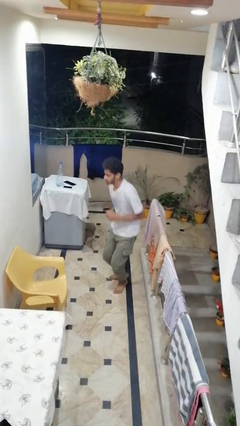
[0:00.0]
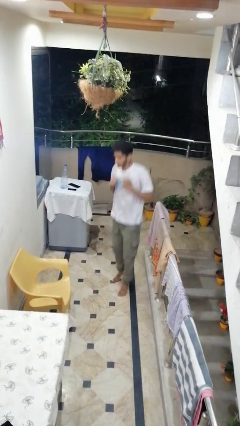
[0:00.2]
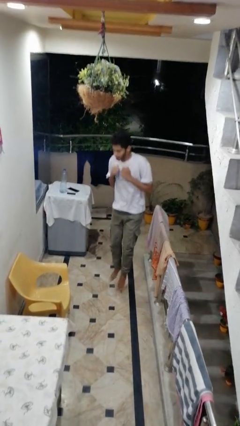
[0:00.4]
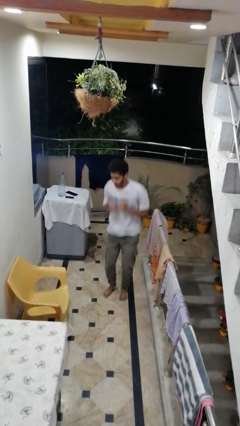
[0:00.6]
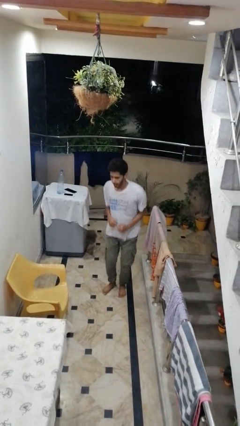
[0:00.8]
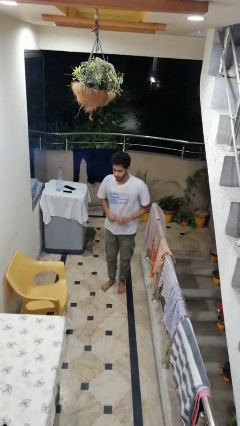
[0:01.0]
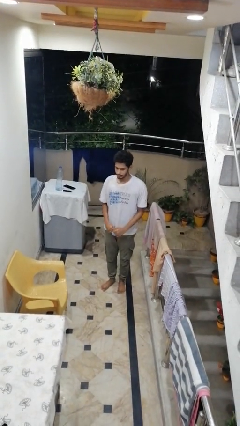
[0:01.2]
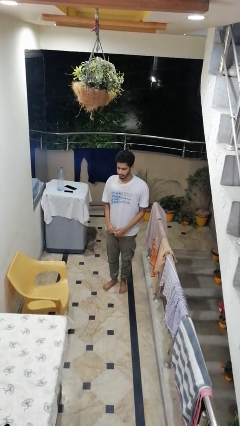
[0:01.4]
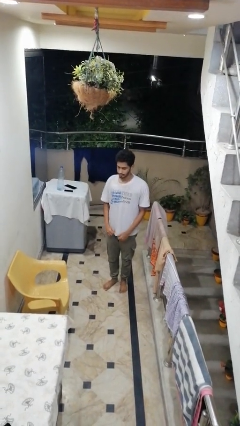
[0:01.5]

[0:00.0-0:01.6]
person jumps

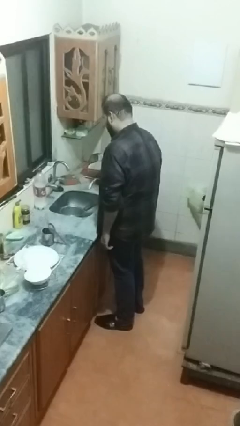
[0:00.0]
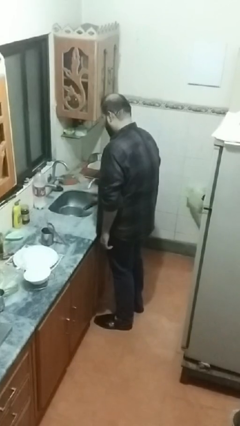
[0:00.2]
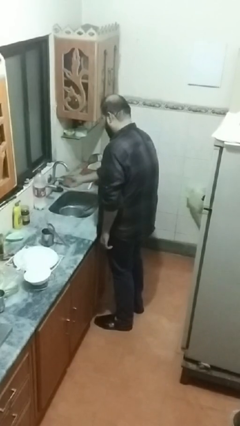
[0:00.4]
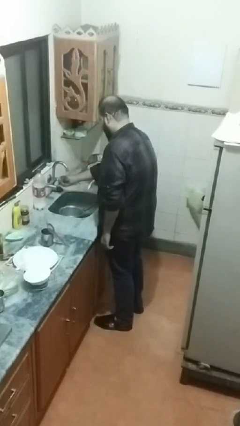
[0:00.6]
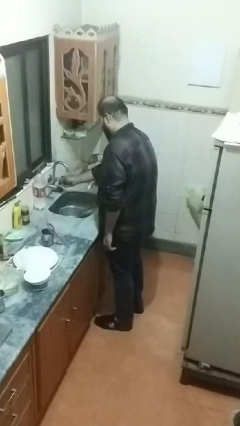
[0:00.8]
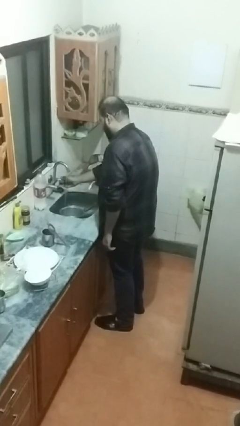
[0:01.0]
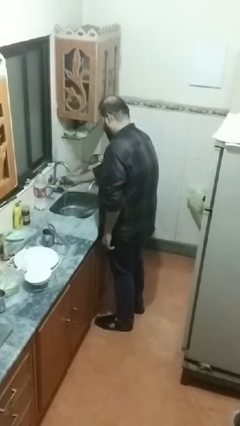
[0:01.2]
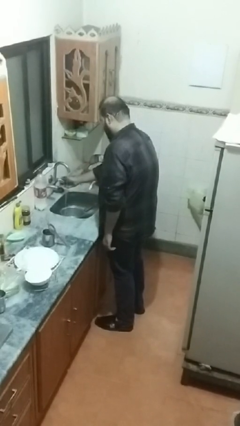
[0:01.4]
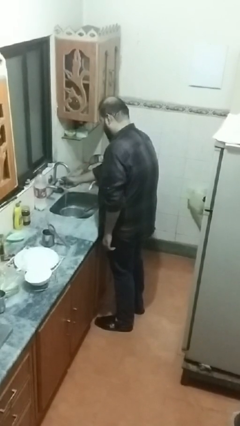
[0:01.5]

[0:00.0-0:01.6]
person turns on faucet

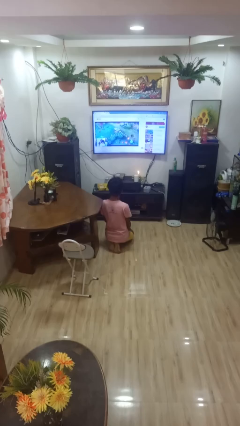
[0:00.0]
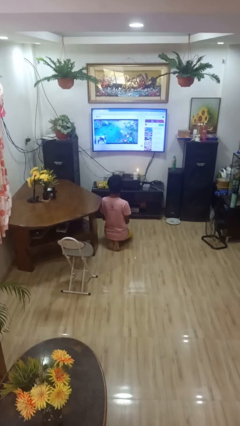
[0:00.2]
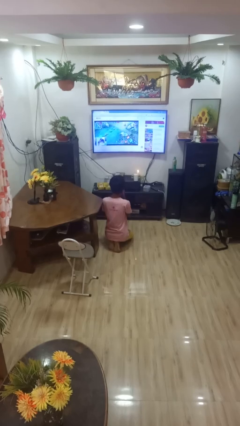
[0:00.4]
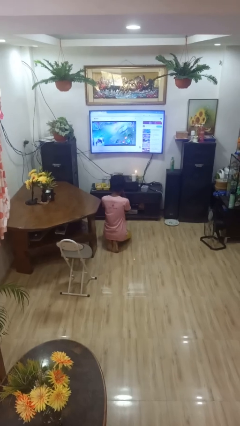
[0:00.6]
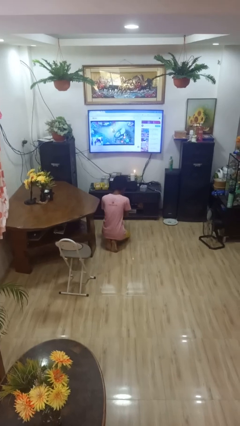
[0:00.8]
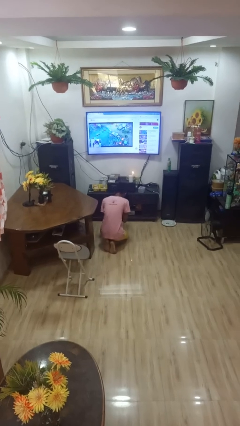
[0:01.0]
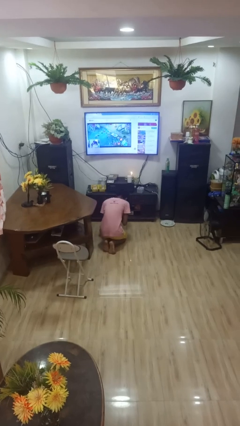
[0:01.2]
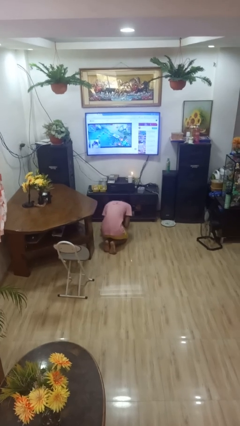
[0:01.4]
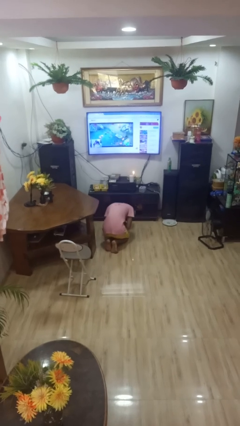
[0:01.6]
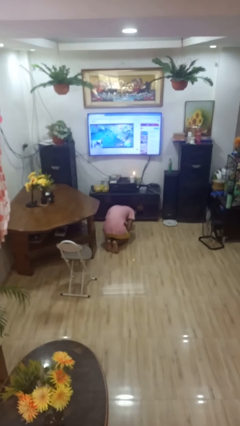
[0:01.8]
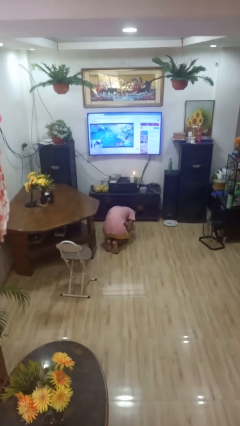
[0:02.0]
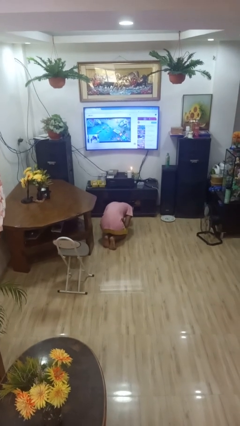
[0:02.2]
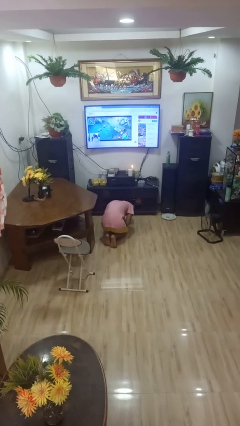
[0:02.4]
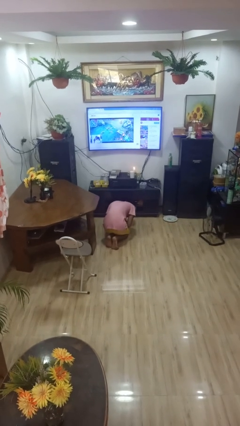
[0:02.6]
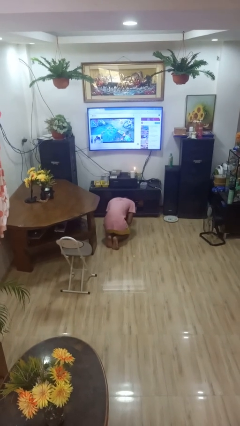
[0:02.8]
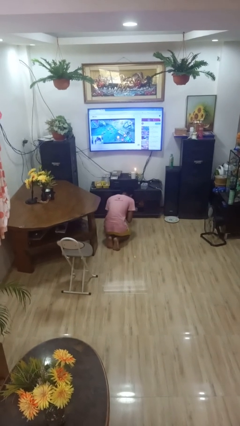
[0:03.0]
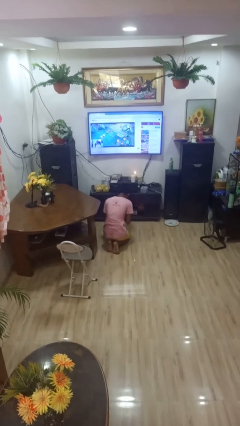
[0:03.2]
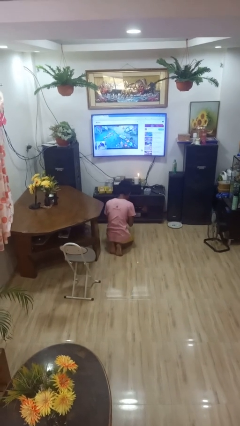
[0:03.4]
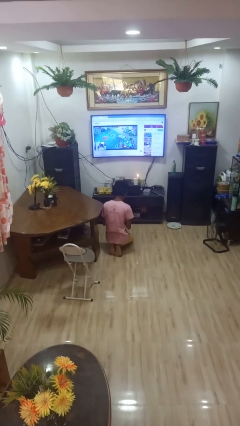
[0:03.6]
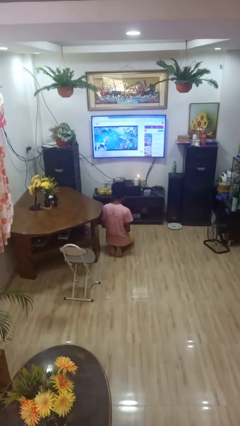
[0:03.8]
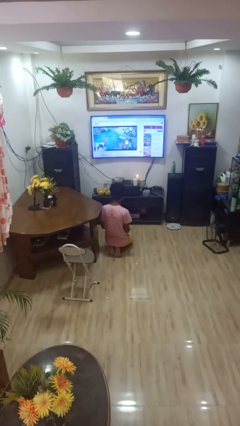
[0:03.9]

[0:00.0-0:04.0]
person prays

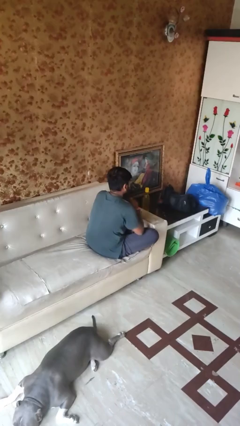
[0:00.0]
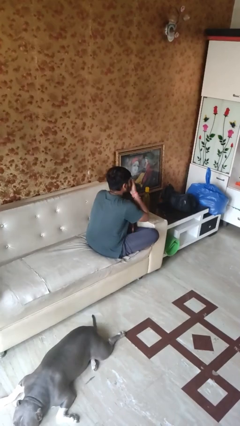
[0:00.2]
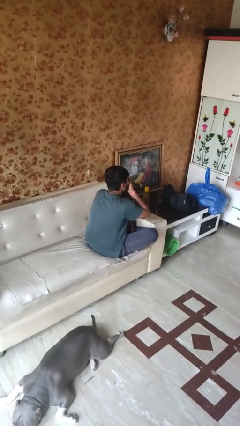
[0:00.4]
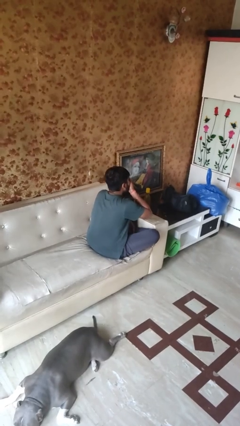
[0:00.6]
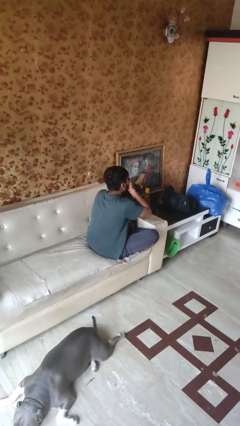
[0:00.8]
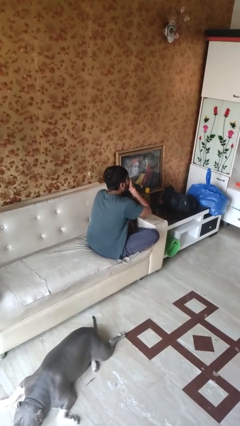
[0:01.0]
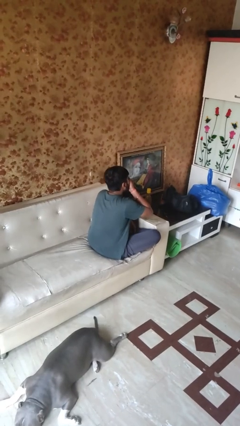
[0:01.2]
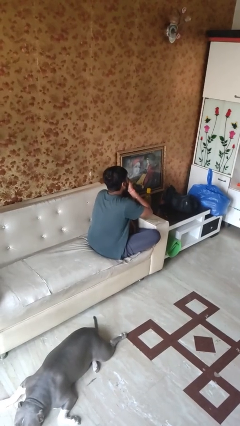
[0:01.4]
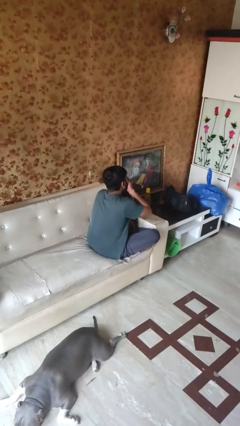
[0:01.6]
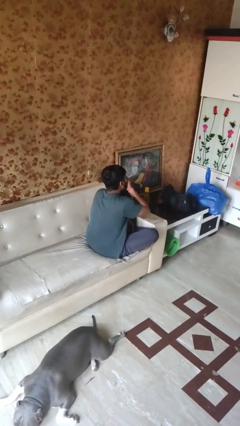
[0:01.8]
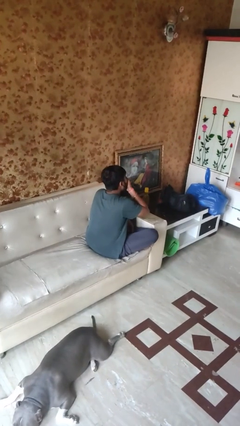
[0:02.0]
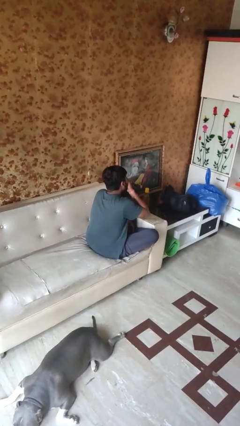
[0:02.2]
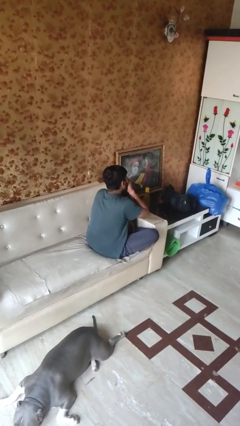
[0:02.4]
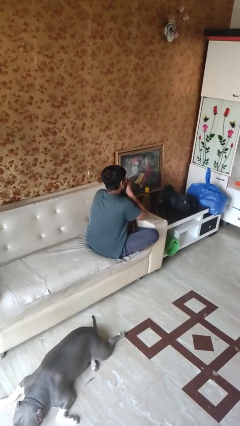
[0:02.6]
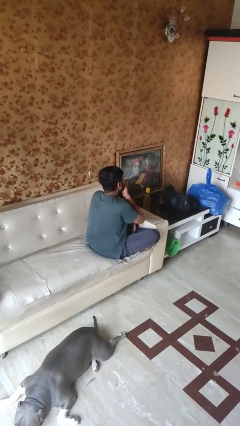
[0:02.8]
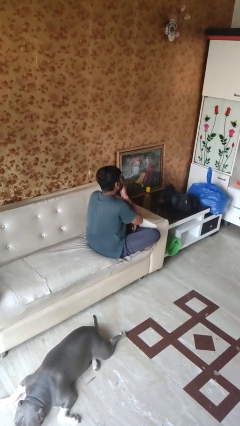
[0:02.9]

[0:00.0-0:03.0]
person yawns

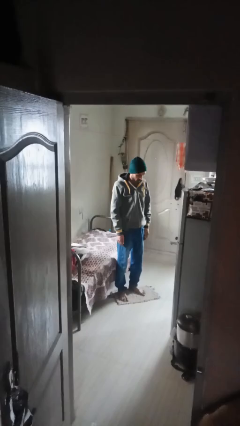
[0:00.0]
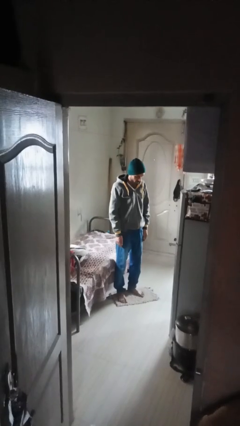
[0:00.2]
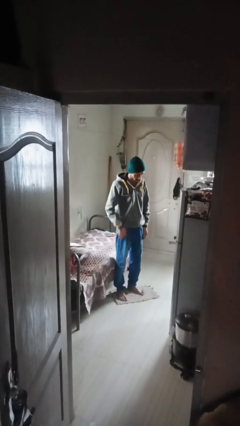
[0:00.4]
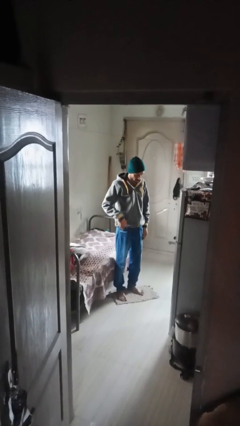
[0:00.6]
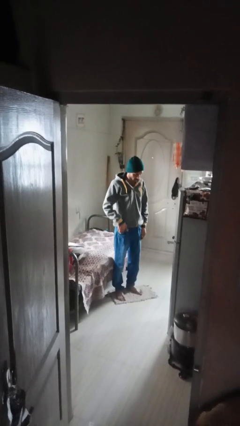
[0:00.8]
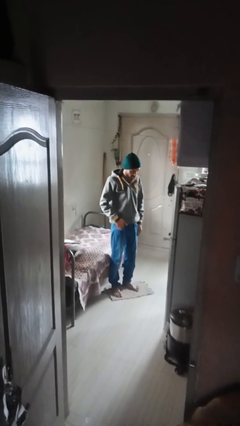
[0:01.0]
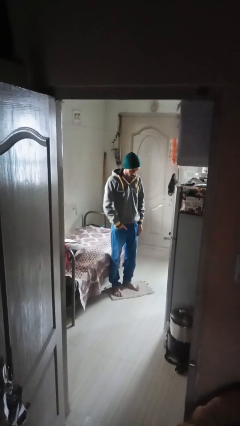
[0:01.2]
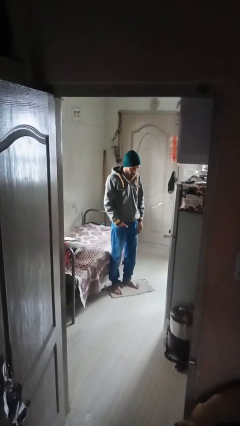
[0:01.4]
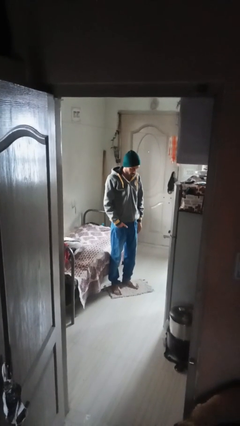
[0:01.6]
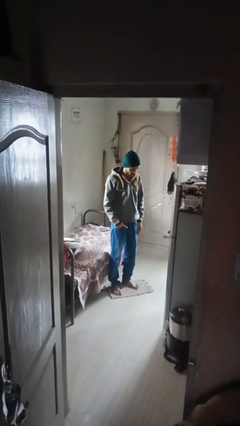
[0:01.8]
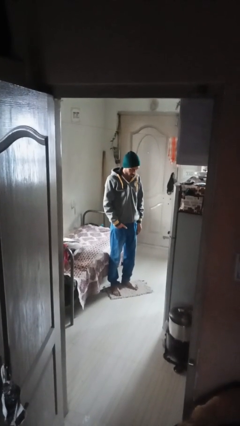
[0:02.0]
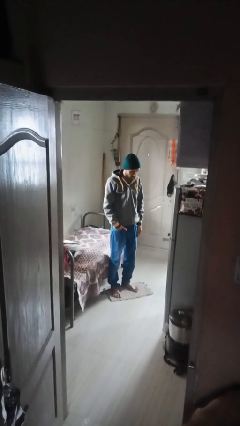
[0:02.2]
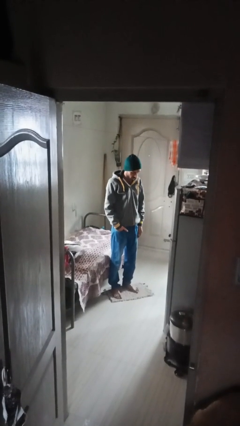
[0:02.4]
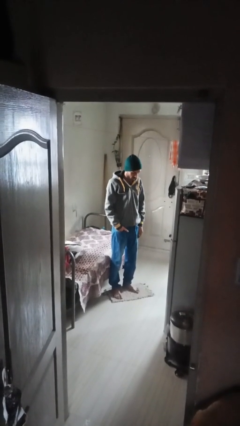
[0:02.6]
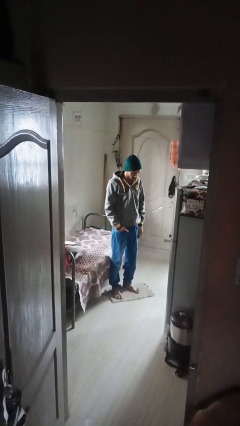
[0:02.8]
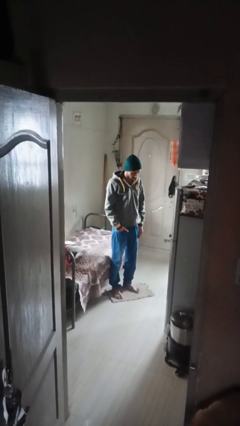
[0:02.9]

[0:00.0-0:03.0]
person puts hands in back pockets

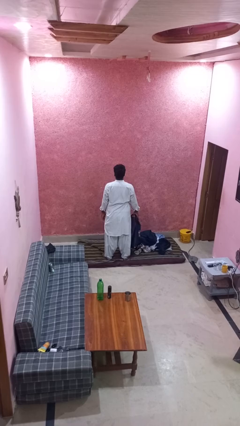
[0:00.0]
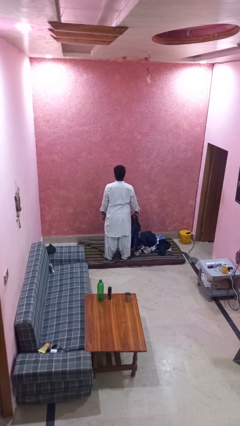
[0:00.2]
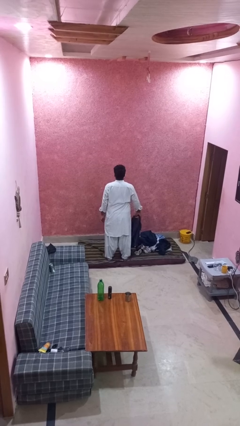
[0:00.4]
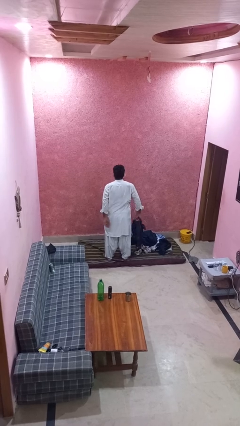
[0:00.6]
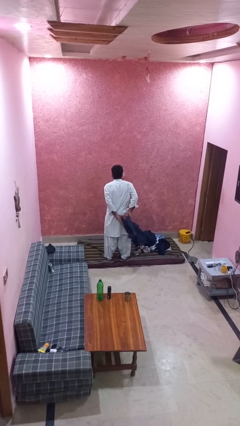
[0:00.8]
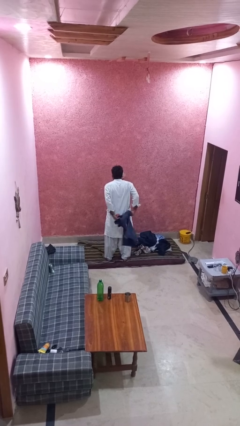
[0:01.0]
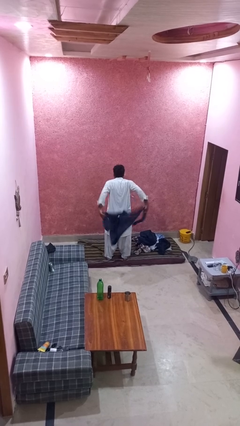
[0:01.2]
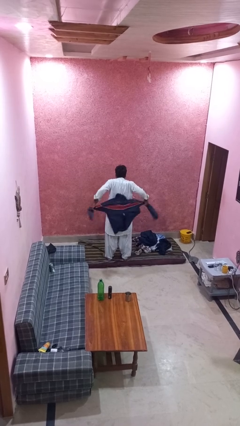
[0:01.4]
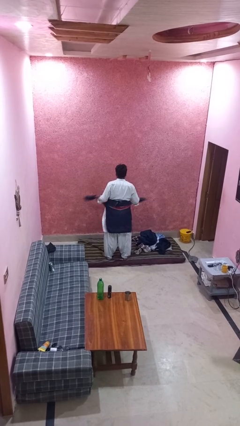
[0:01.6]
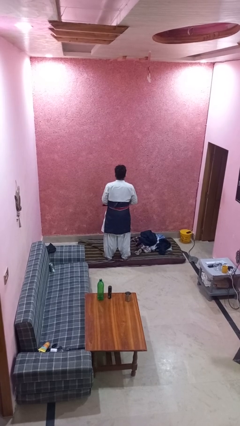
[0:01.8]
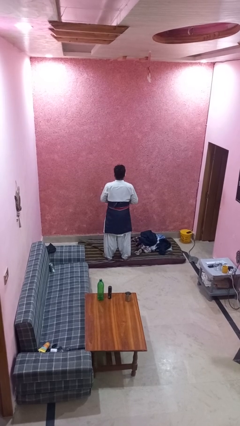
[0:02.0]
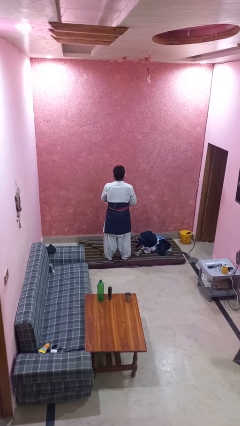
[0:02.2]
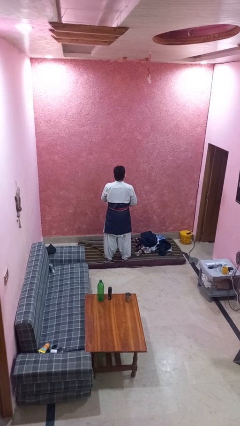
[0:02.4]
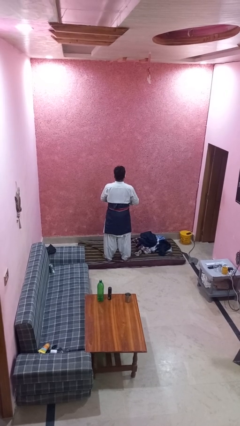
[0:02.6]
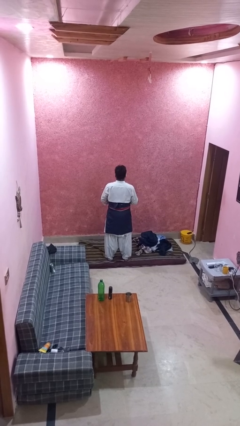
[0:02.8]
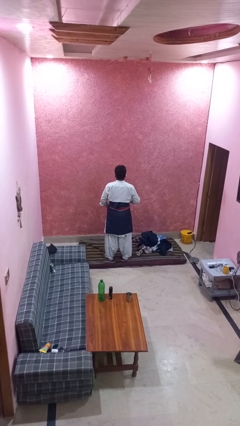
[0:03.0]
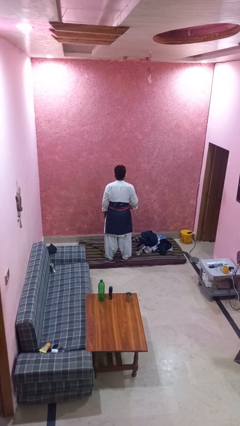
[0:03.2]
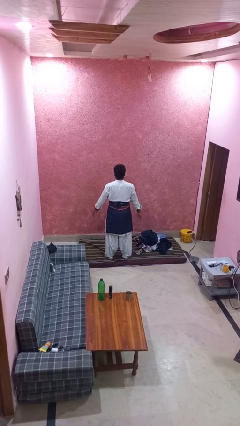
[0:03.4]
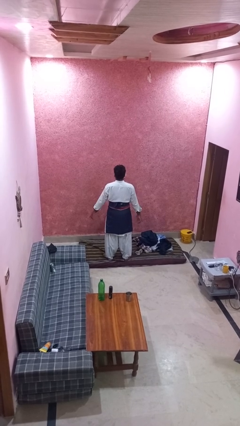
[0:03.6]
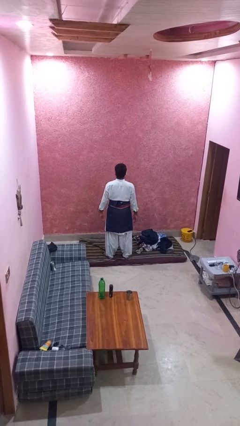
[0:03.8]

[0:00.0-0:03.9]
person ties jacket around waist

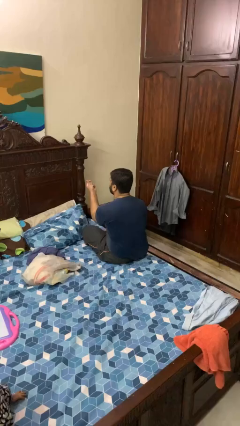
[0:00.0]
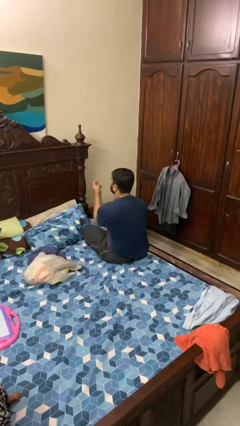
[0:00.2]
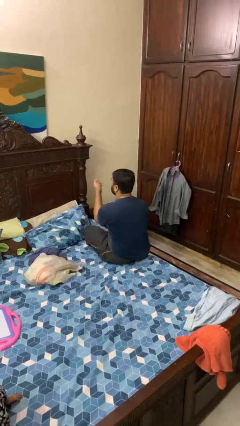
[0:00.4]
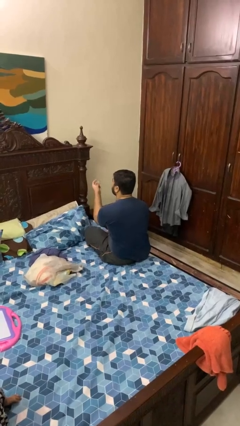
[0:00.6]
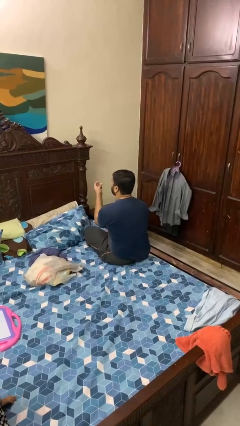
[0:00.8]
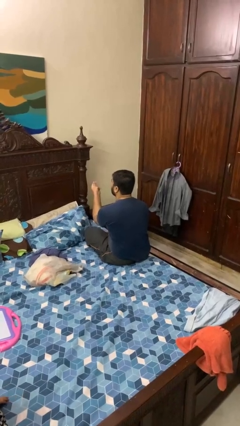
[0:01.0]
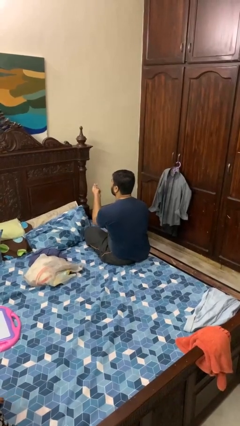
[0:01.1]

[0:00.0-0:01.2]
person snaps fingers
